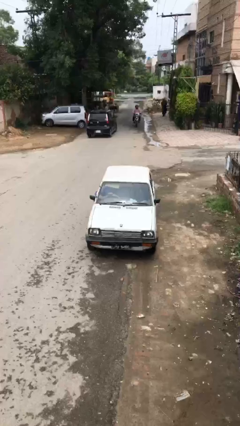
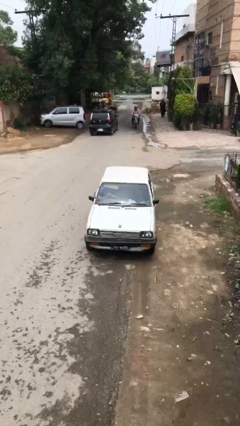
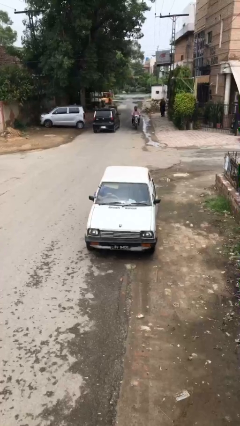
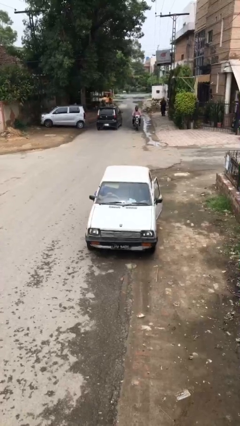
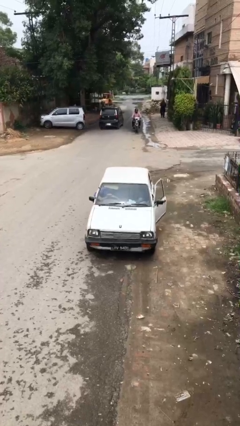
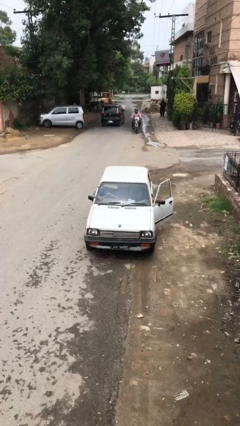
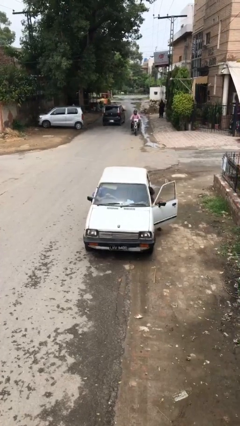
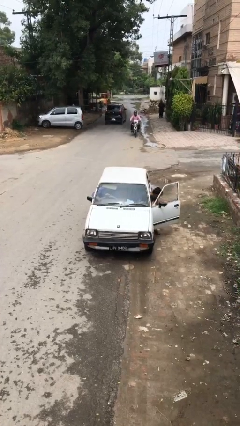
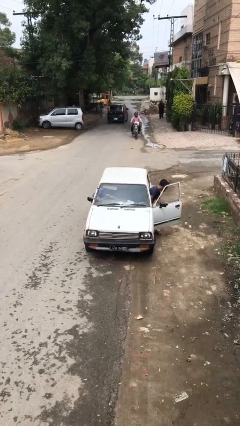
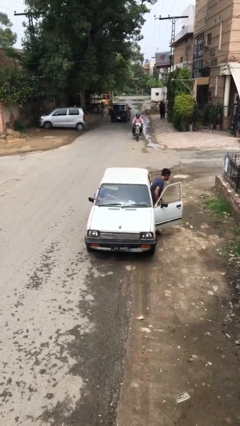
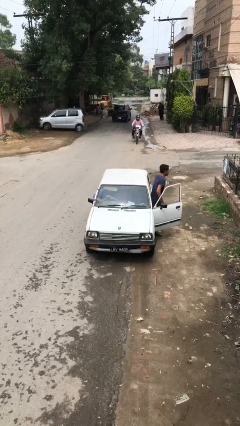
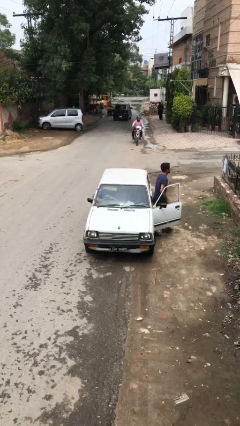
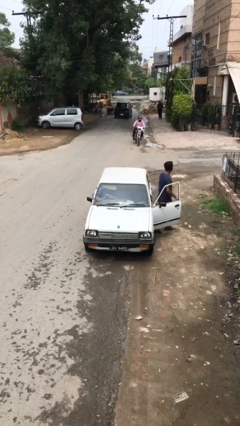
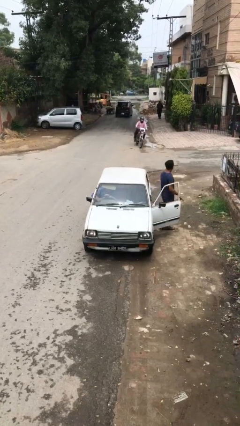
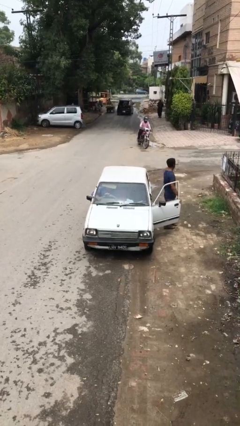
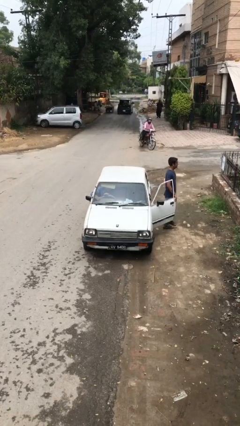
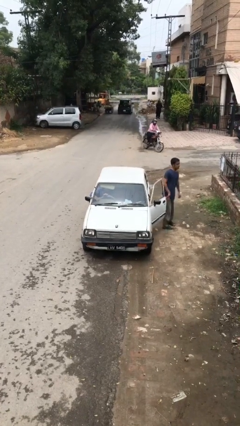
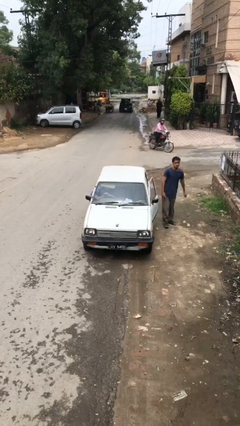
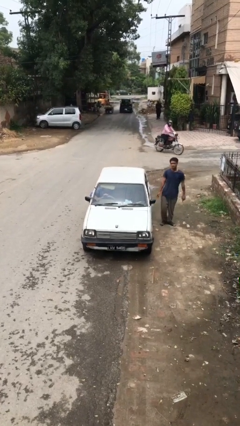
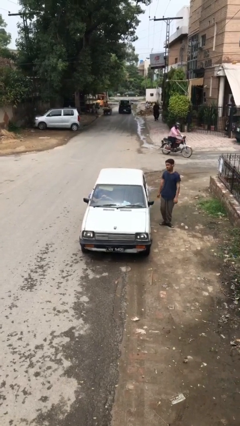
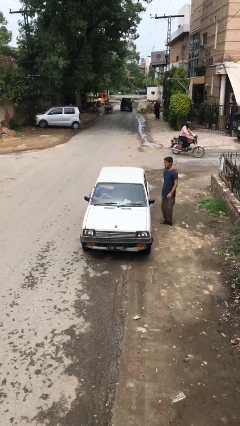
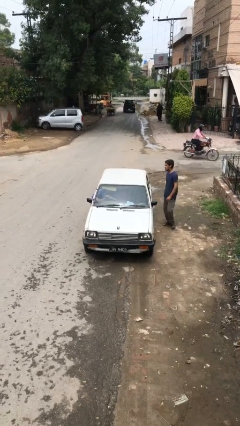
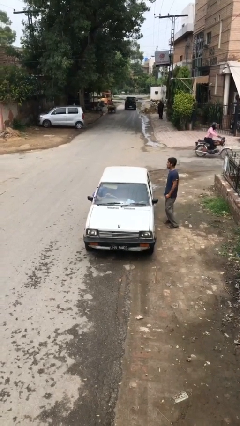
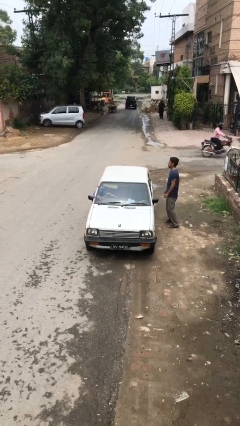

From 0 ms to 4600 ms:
car drops off person

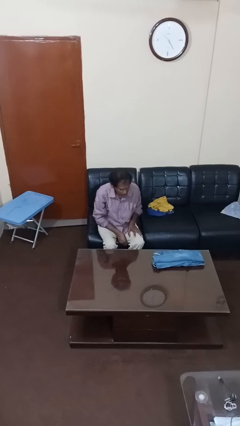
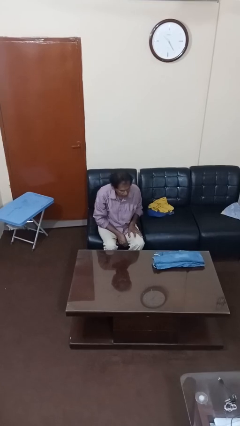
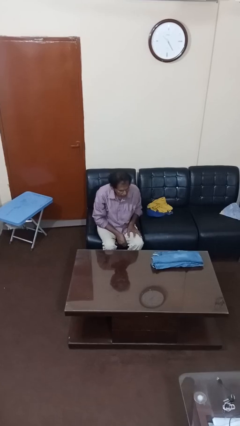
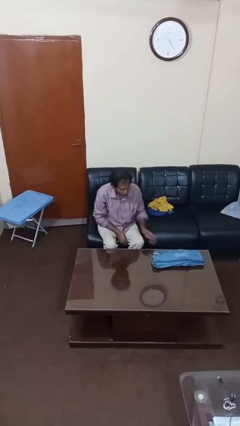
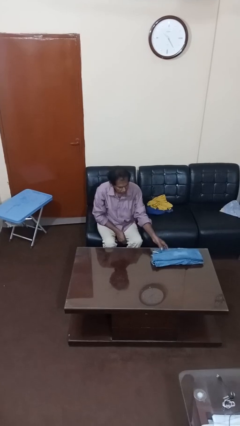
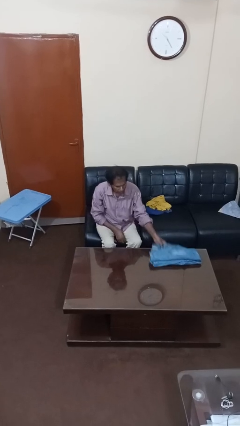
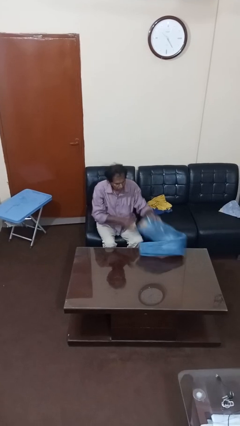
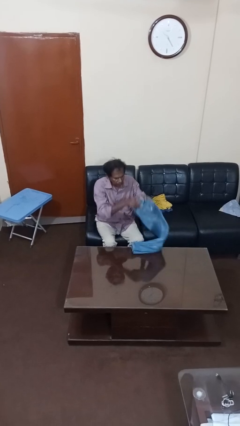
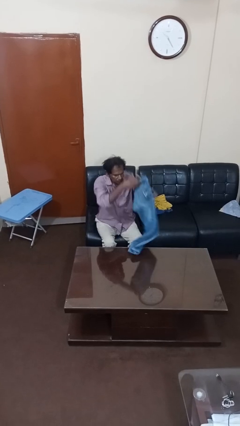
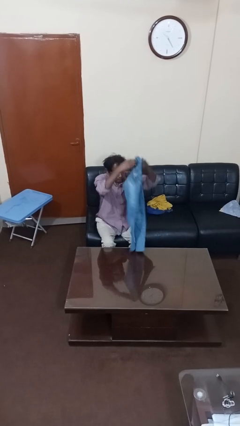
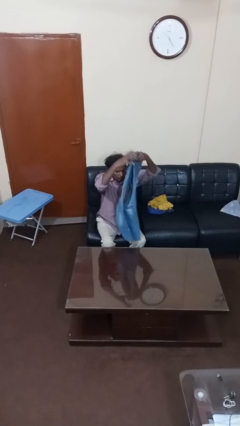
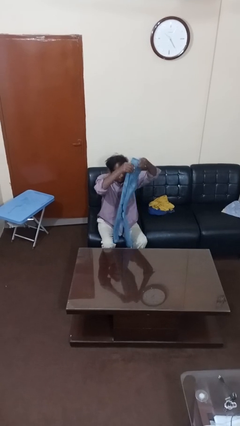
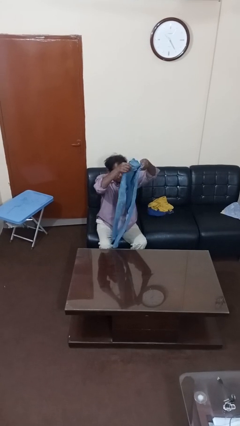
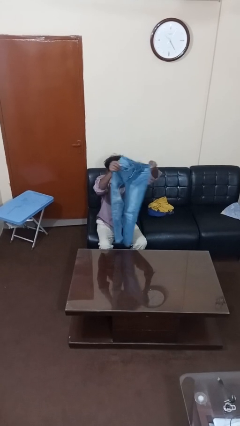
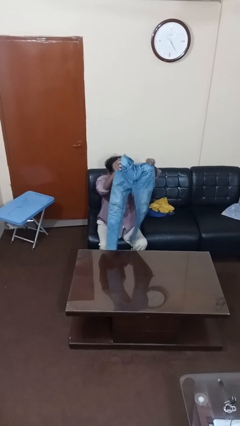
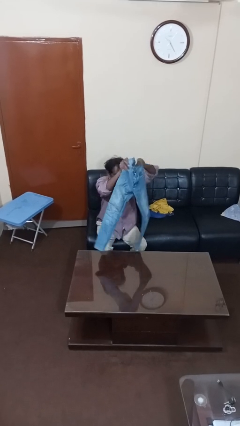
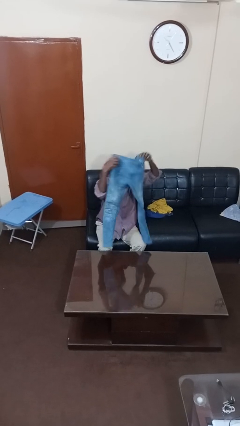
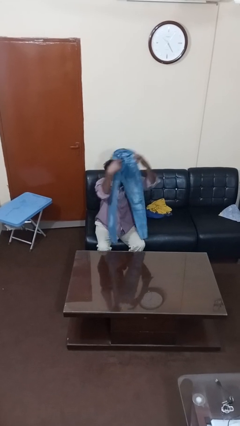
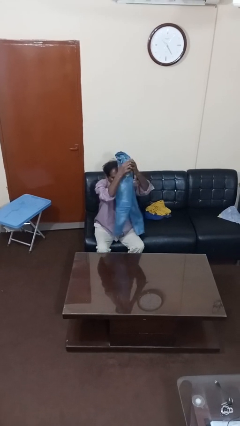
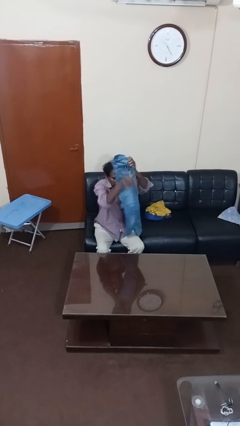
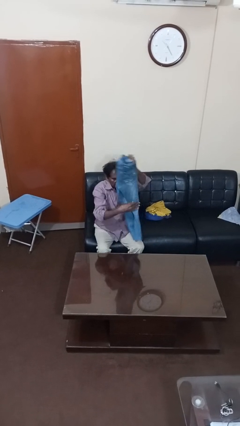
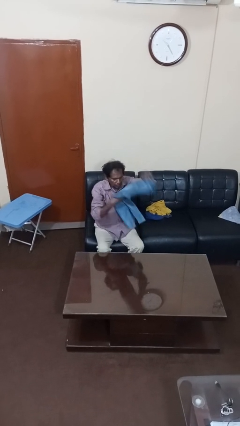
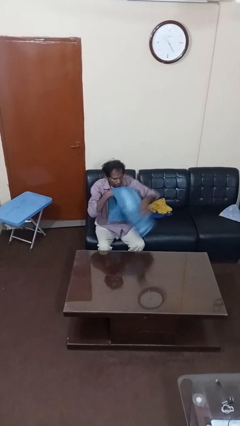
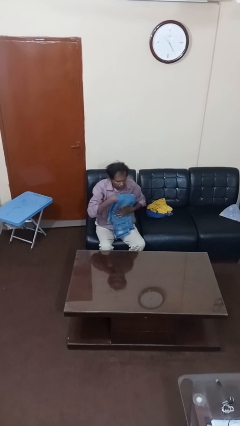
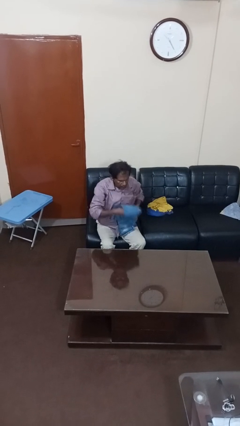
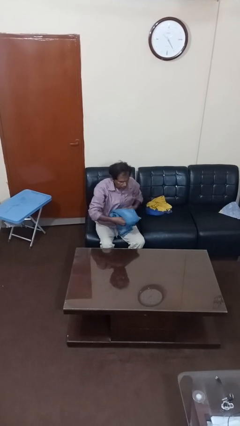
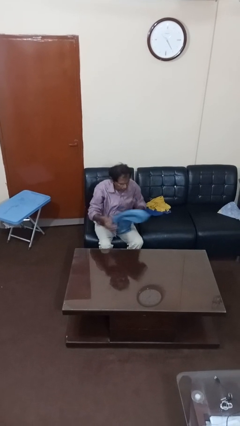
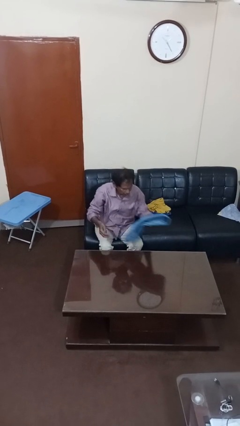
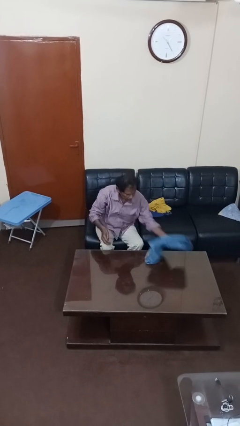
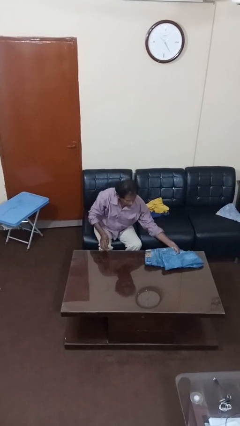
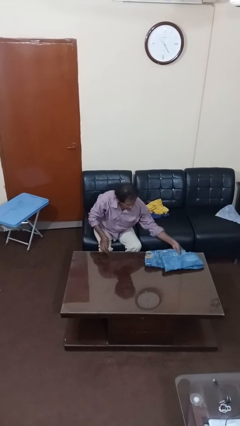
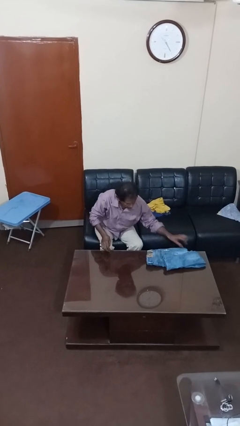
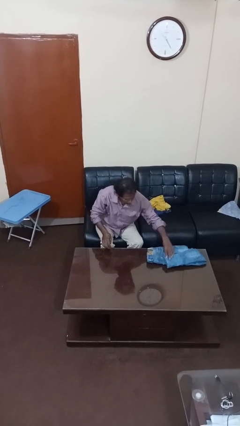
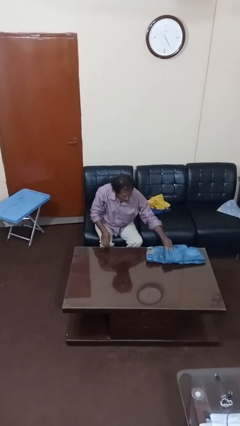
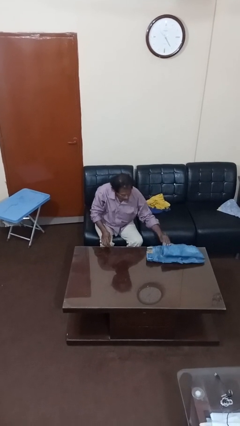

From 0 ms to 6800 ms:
person folds pants

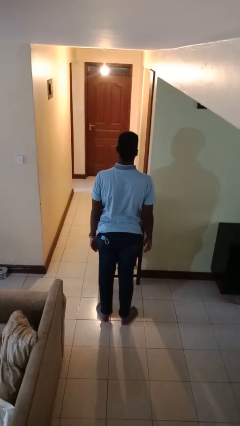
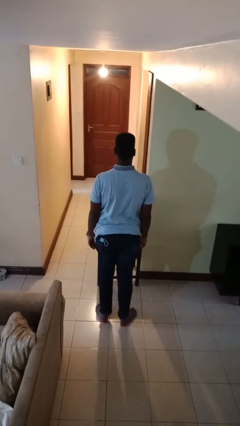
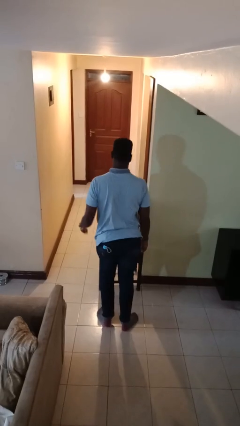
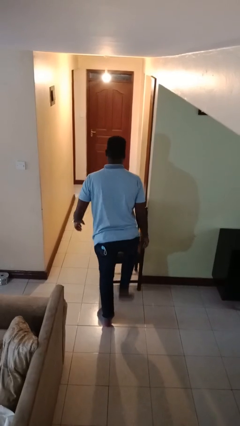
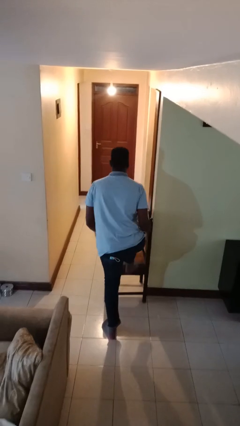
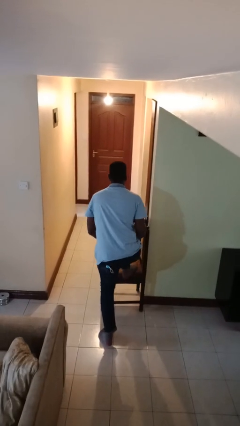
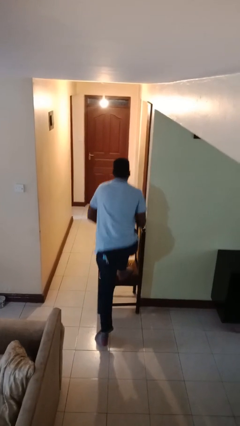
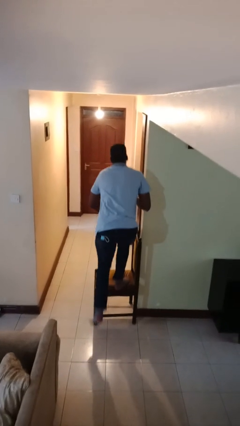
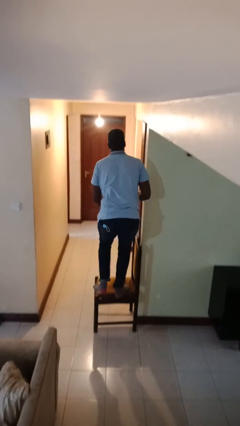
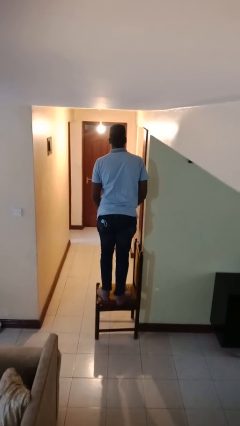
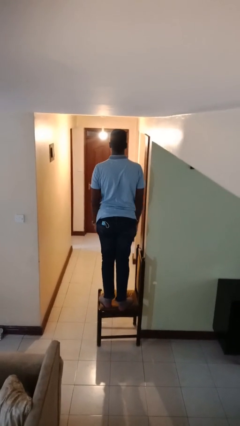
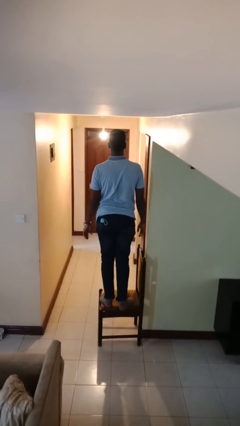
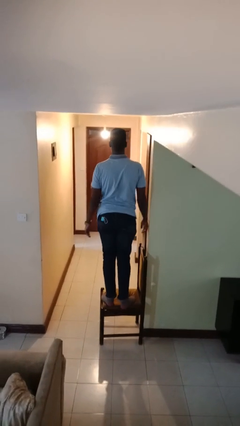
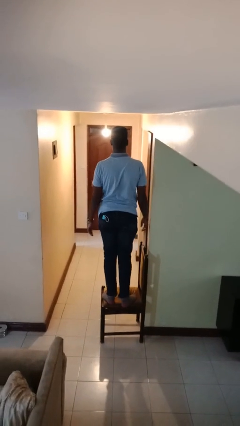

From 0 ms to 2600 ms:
person climbs on chair

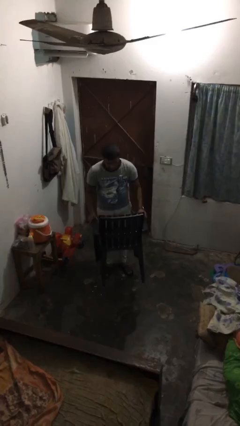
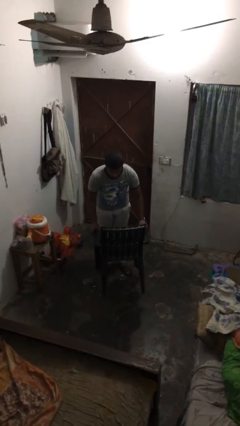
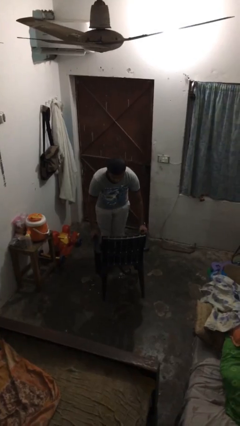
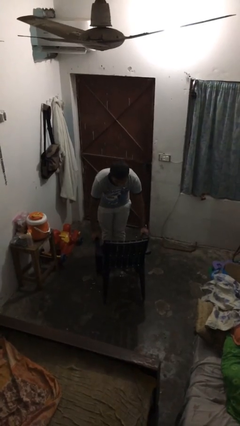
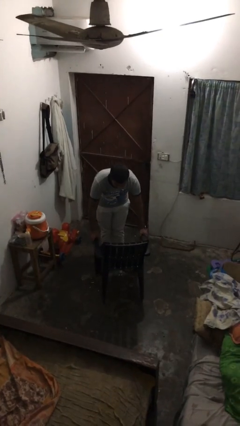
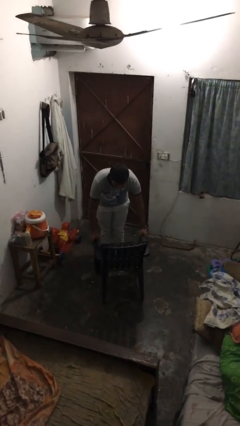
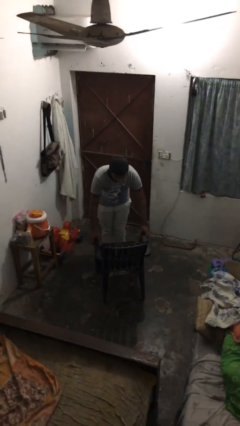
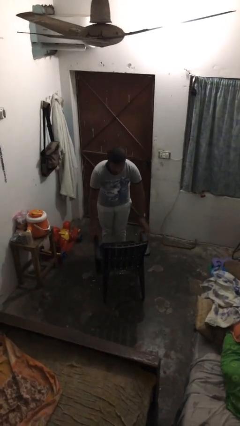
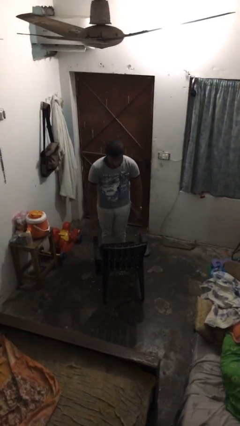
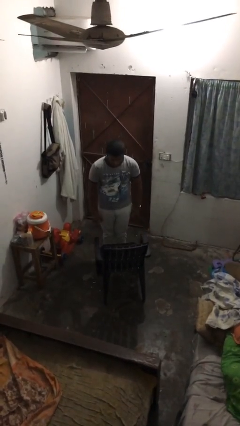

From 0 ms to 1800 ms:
person puts down object on floor

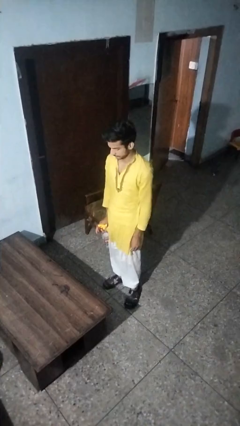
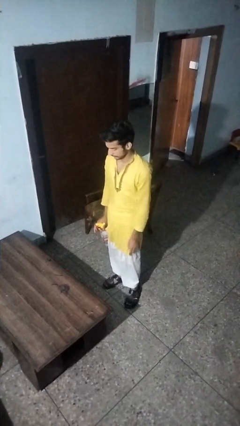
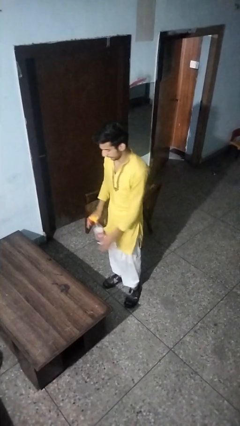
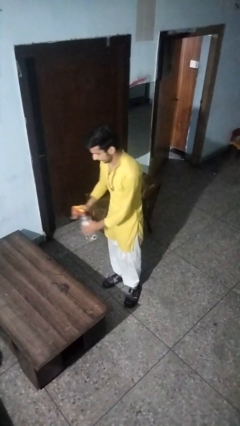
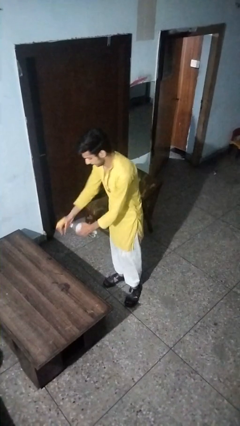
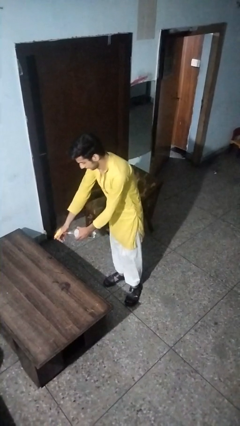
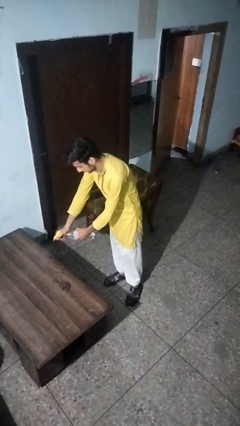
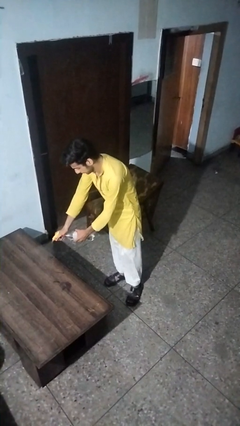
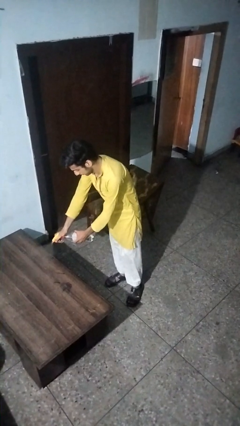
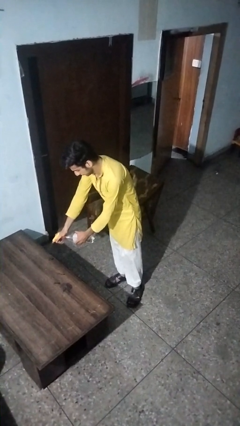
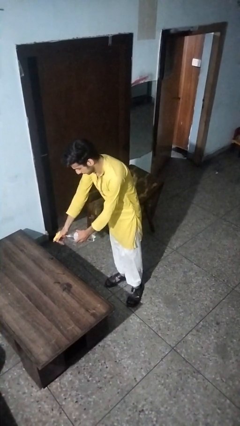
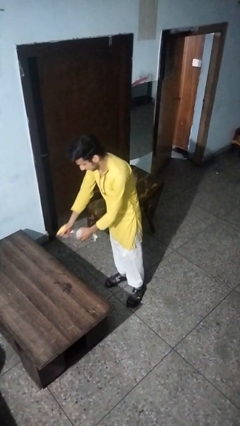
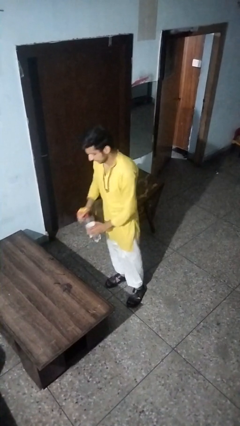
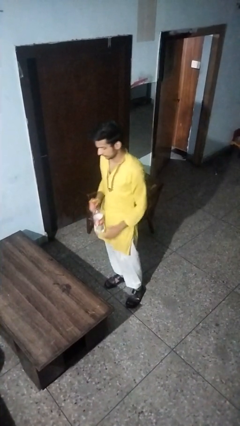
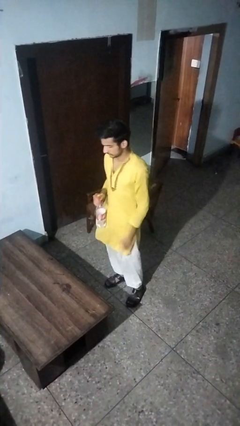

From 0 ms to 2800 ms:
person sprays from bottle
